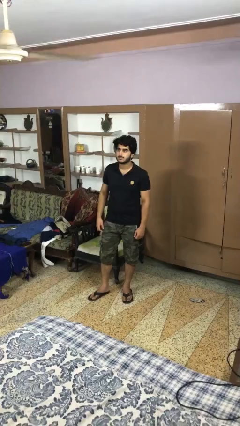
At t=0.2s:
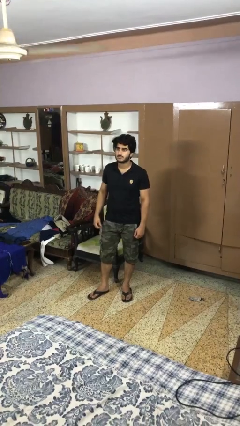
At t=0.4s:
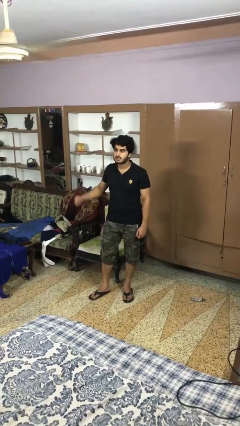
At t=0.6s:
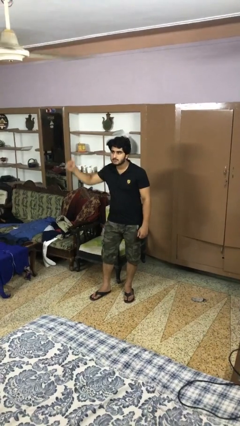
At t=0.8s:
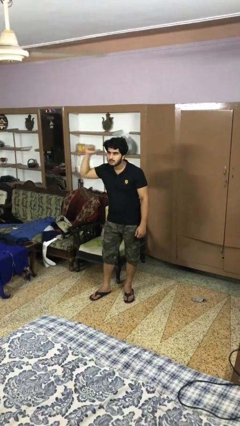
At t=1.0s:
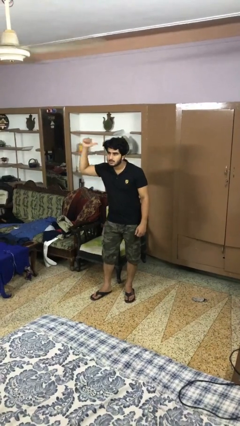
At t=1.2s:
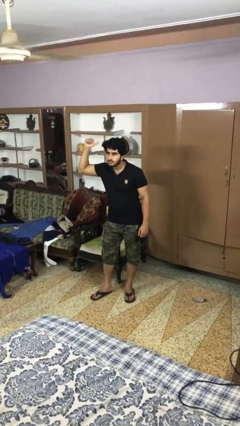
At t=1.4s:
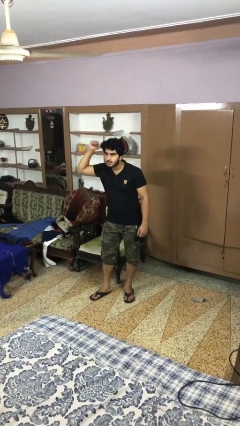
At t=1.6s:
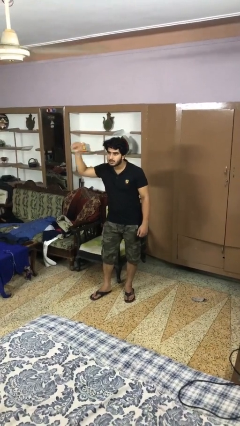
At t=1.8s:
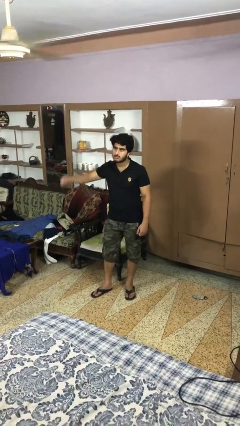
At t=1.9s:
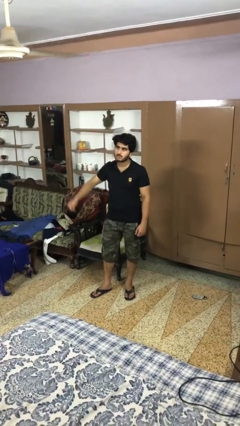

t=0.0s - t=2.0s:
person gestures behind me

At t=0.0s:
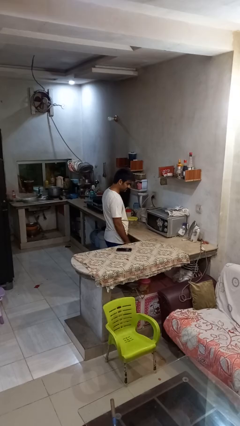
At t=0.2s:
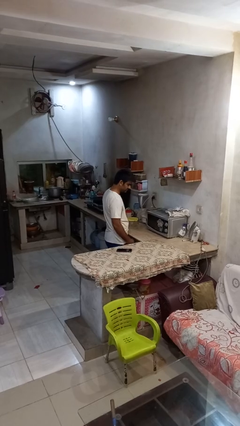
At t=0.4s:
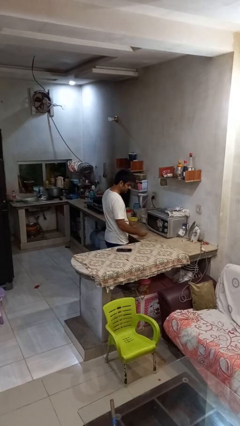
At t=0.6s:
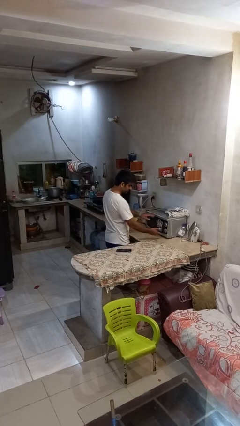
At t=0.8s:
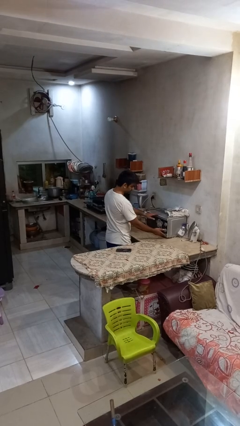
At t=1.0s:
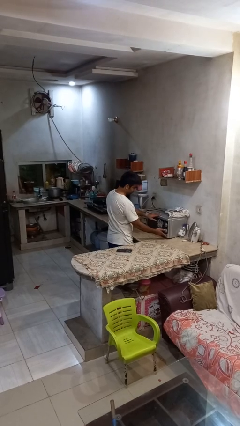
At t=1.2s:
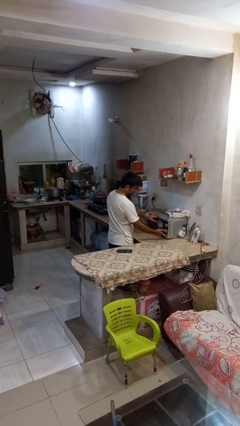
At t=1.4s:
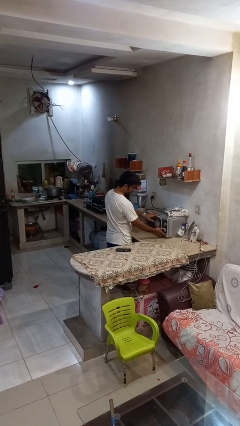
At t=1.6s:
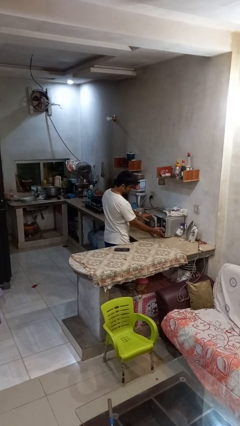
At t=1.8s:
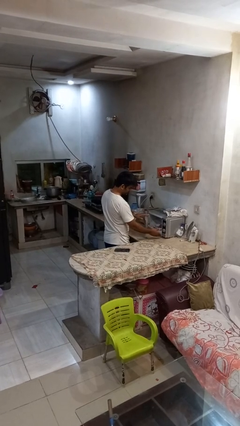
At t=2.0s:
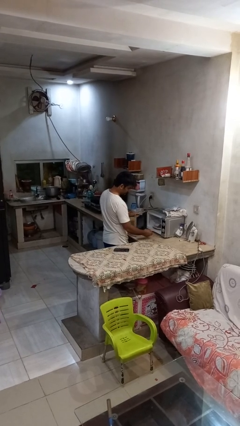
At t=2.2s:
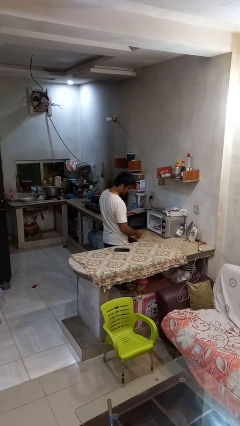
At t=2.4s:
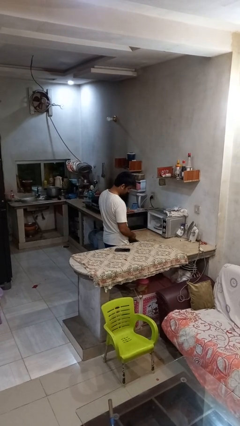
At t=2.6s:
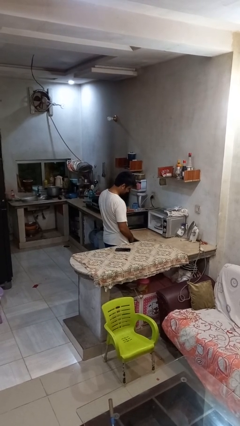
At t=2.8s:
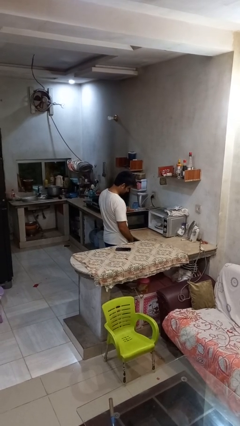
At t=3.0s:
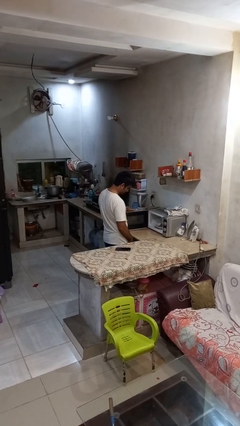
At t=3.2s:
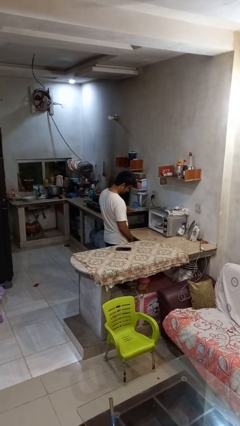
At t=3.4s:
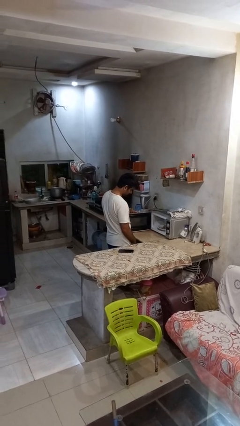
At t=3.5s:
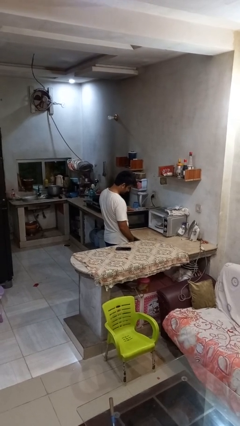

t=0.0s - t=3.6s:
person opens microwave

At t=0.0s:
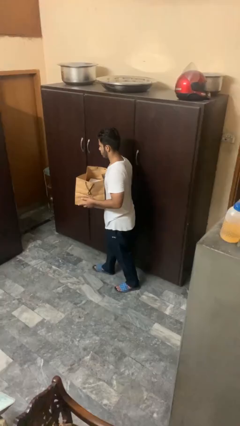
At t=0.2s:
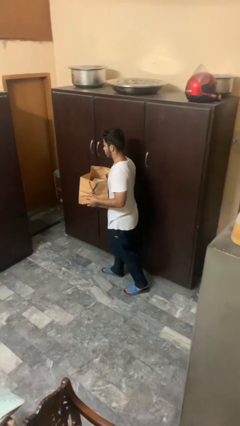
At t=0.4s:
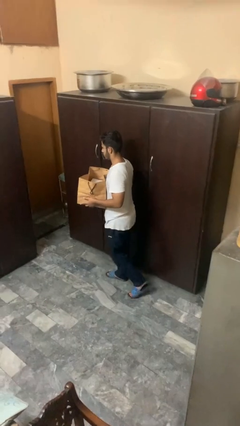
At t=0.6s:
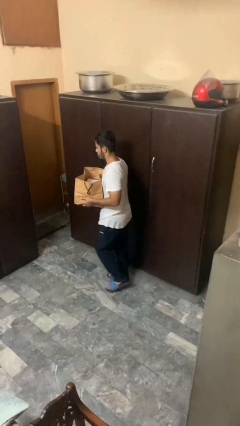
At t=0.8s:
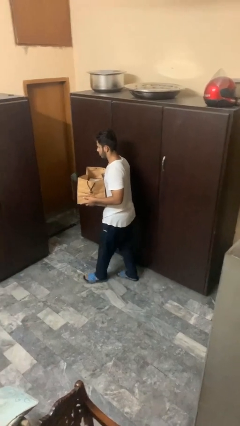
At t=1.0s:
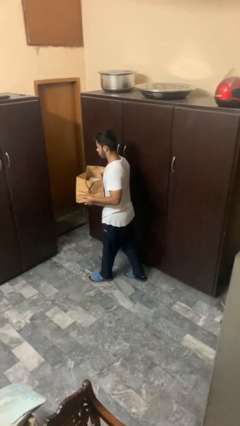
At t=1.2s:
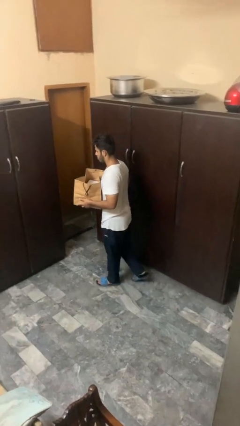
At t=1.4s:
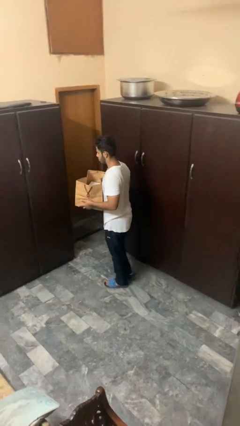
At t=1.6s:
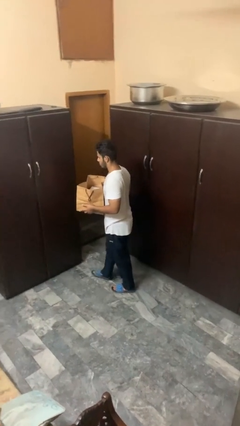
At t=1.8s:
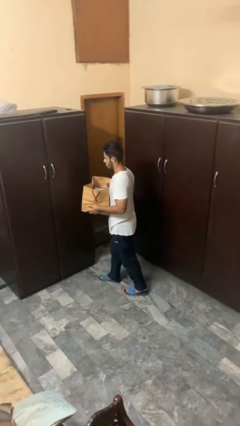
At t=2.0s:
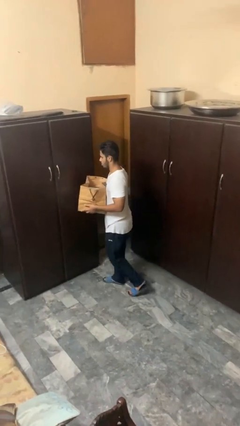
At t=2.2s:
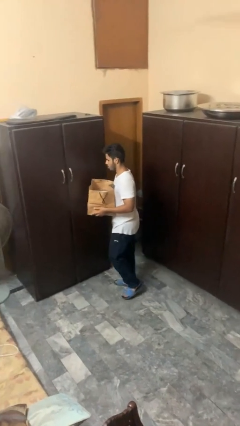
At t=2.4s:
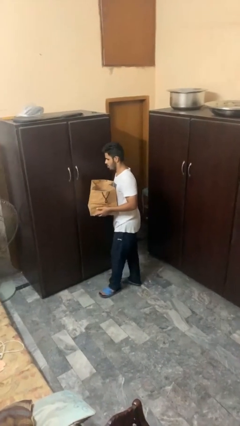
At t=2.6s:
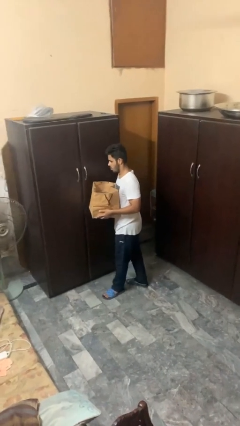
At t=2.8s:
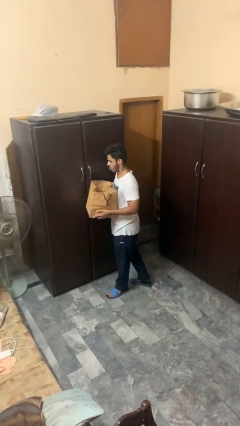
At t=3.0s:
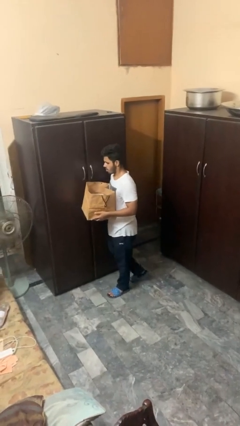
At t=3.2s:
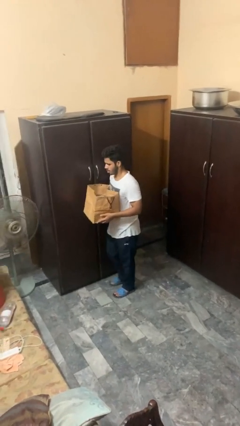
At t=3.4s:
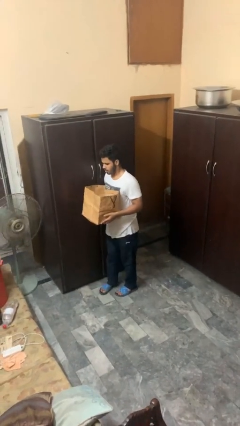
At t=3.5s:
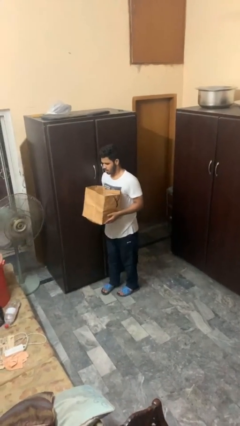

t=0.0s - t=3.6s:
person carries groceries

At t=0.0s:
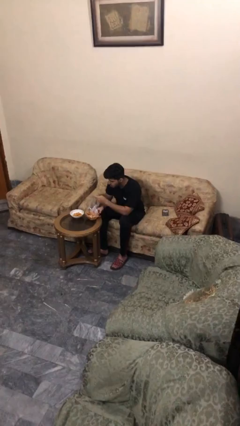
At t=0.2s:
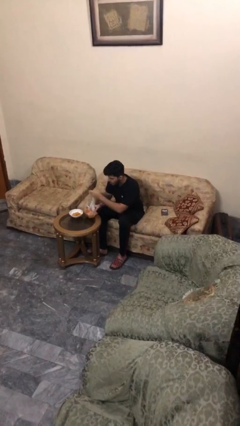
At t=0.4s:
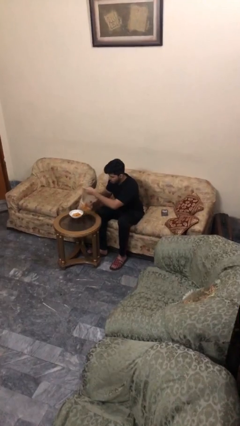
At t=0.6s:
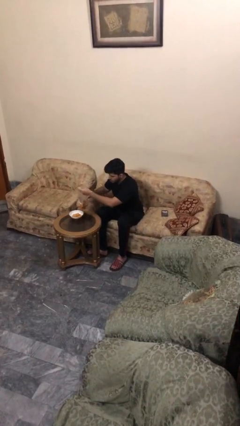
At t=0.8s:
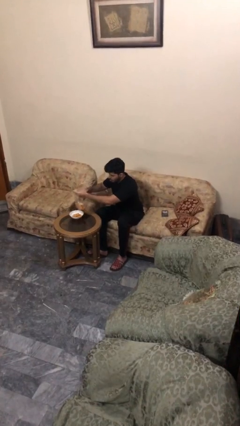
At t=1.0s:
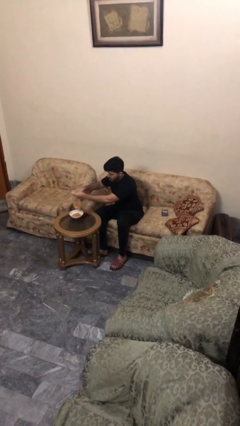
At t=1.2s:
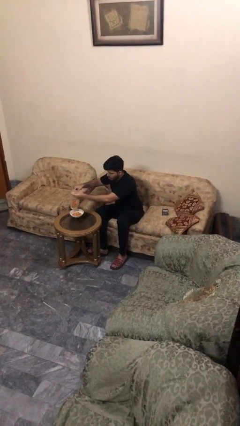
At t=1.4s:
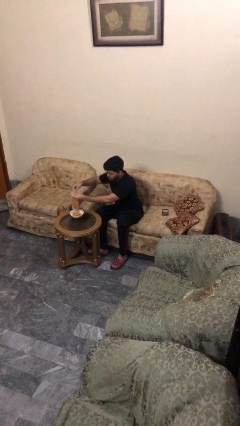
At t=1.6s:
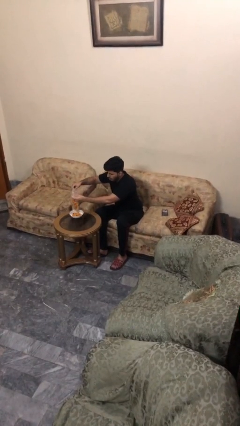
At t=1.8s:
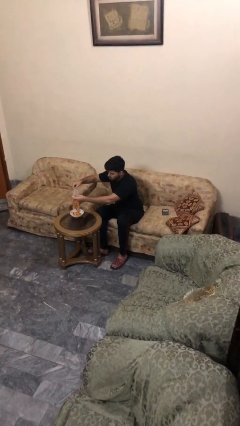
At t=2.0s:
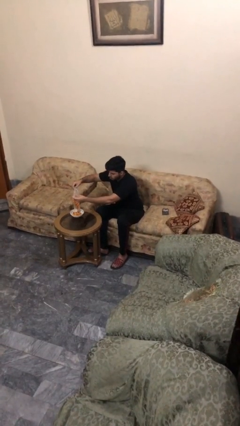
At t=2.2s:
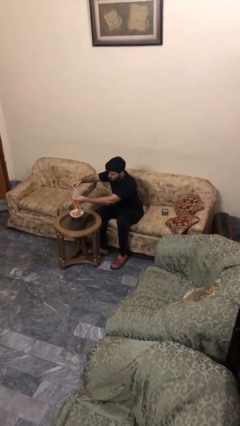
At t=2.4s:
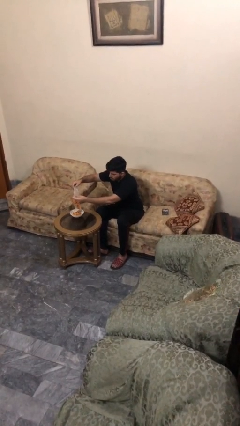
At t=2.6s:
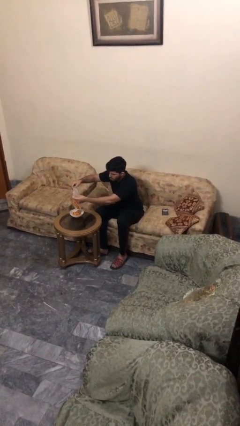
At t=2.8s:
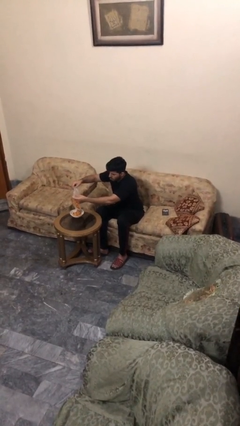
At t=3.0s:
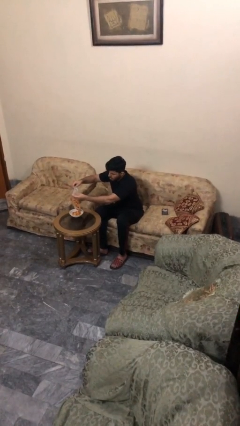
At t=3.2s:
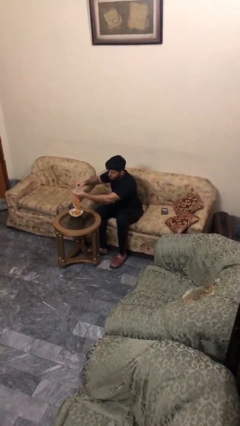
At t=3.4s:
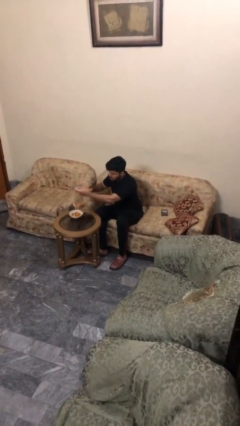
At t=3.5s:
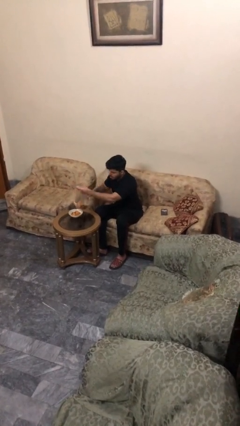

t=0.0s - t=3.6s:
person pours into bowl

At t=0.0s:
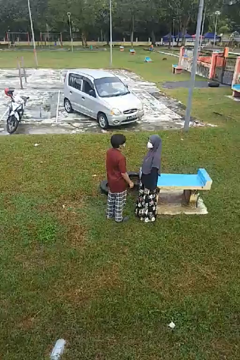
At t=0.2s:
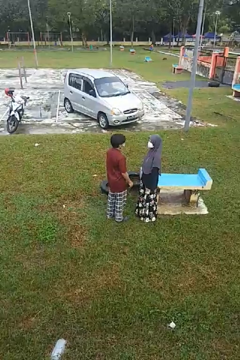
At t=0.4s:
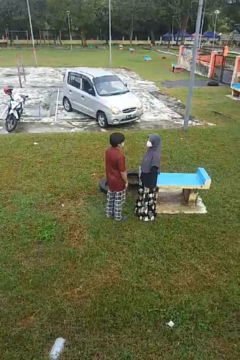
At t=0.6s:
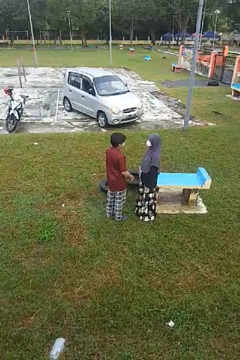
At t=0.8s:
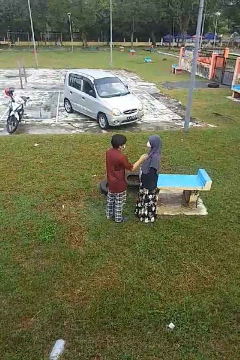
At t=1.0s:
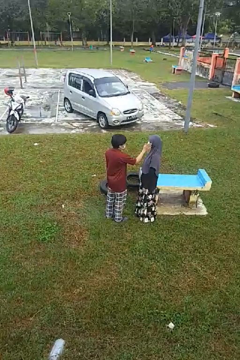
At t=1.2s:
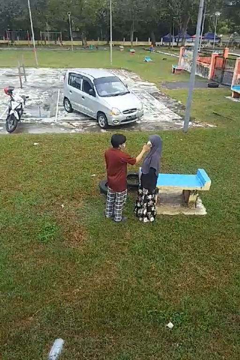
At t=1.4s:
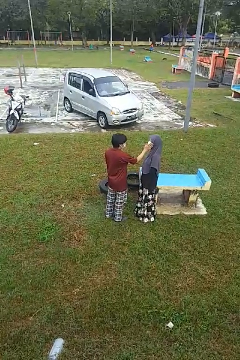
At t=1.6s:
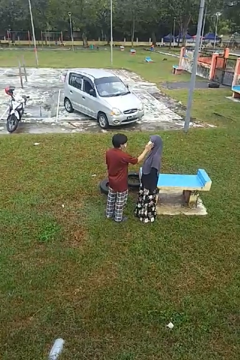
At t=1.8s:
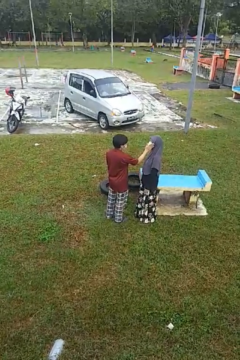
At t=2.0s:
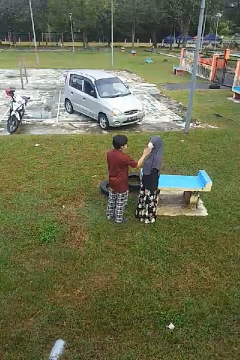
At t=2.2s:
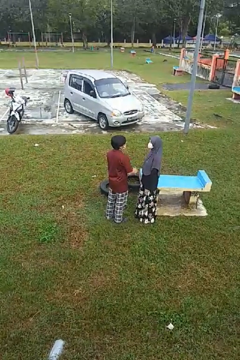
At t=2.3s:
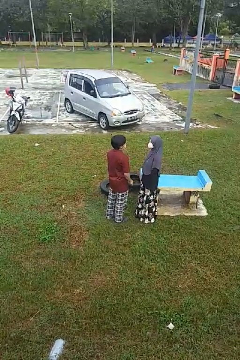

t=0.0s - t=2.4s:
person touches face of person

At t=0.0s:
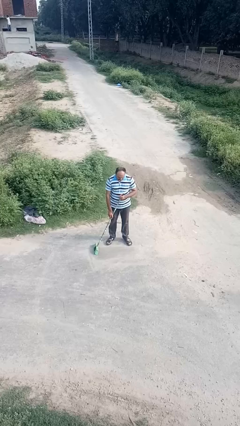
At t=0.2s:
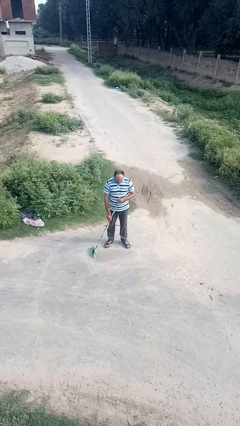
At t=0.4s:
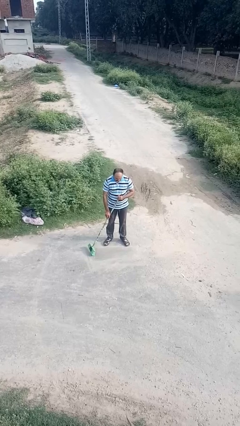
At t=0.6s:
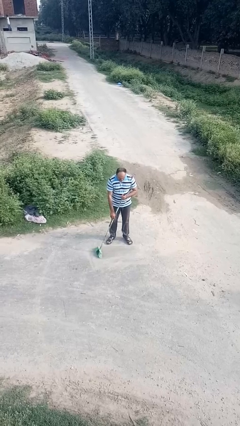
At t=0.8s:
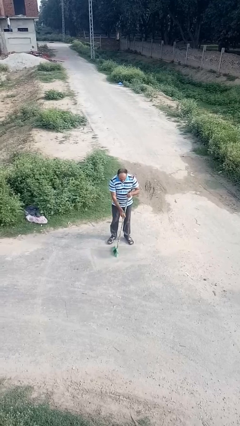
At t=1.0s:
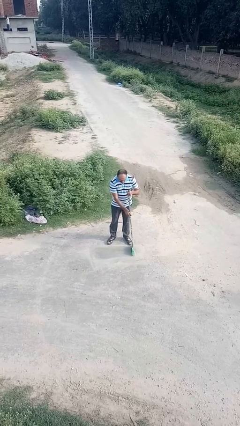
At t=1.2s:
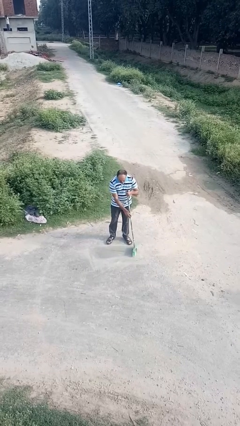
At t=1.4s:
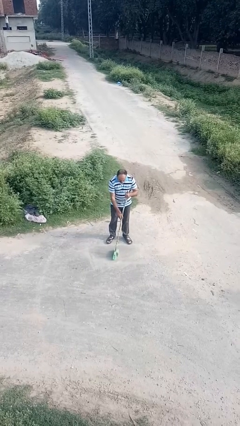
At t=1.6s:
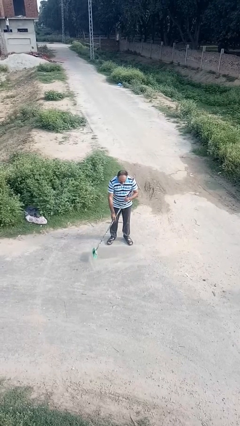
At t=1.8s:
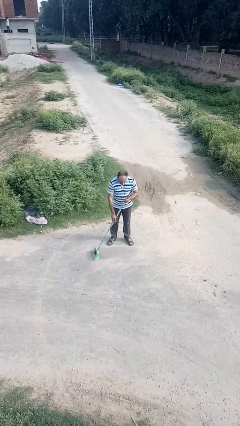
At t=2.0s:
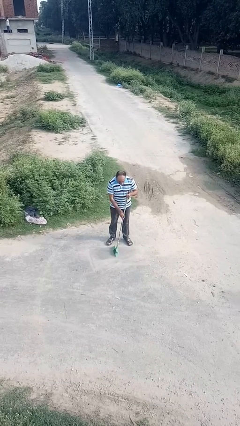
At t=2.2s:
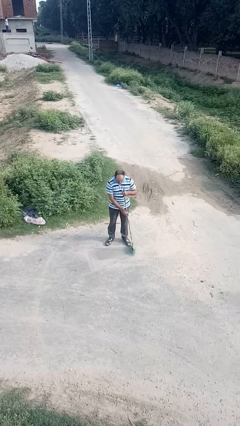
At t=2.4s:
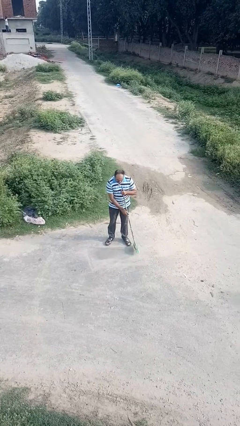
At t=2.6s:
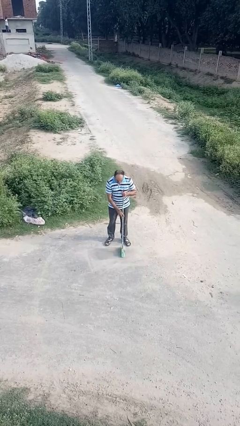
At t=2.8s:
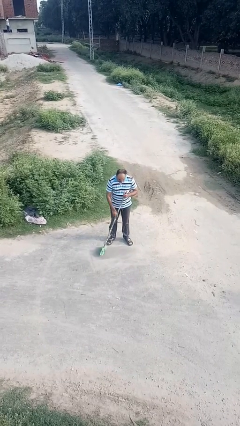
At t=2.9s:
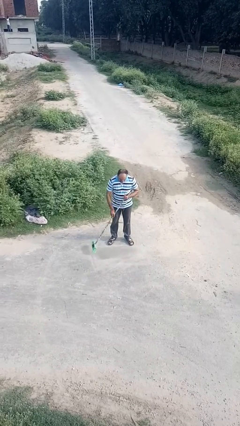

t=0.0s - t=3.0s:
person sweeps floor
